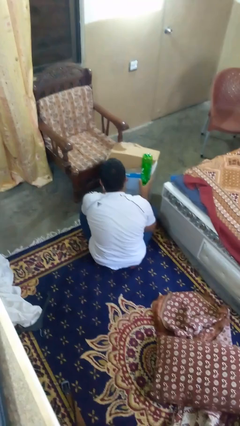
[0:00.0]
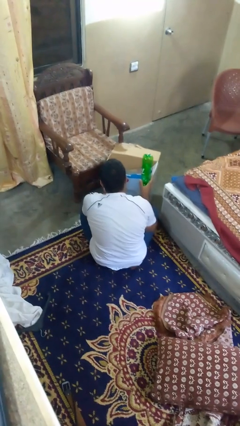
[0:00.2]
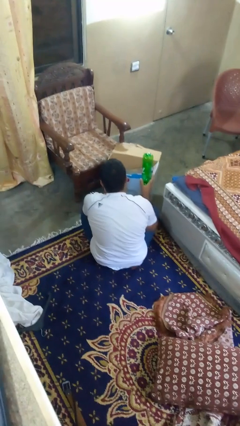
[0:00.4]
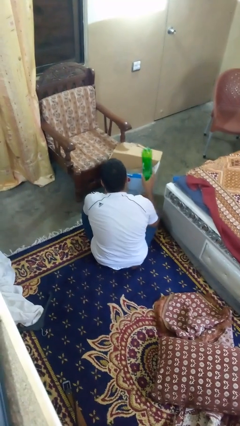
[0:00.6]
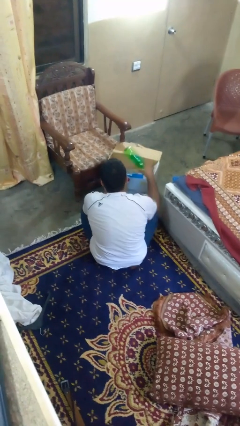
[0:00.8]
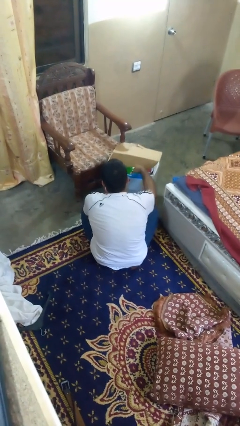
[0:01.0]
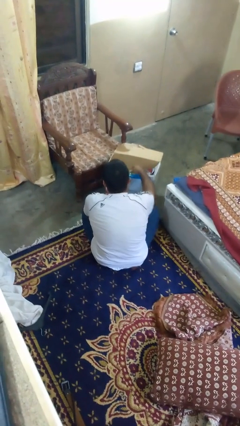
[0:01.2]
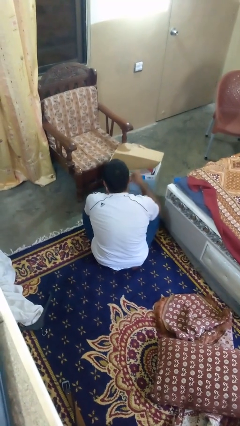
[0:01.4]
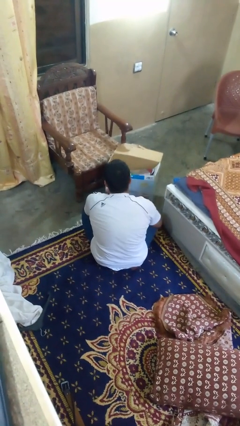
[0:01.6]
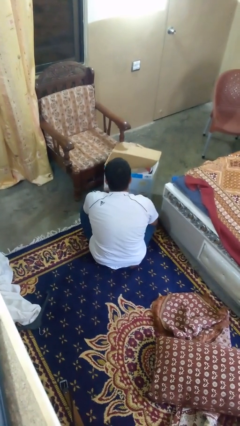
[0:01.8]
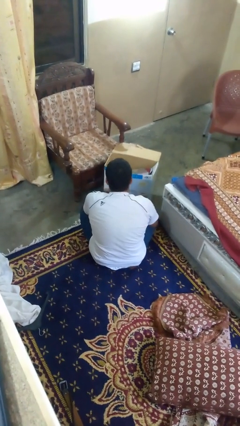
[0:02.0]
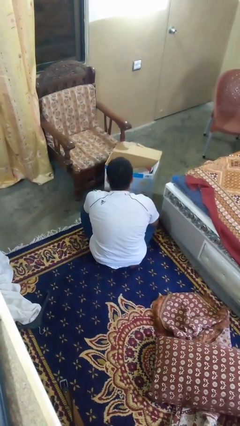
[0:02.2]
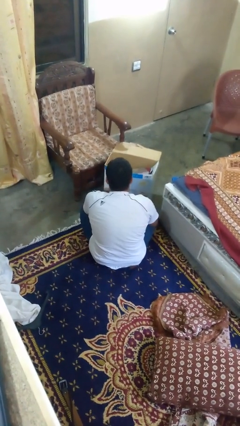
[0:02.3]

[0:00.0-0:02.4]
person puts object into box

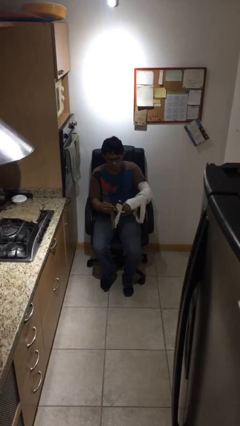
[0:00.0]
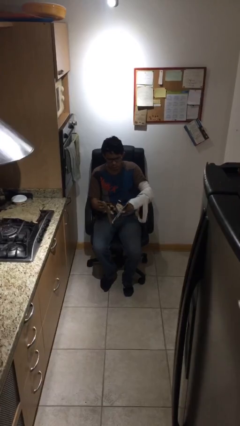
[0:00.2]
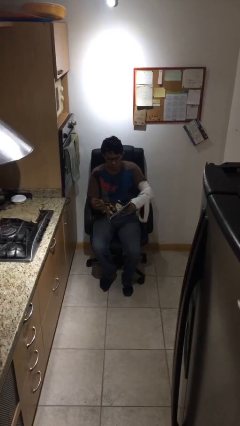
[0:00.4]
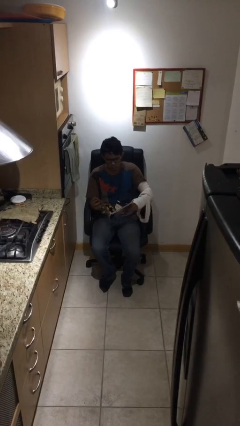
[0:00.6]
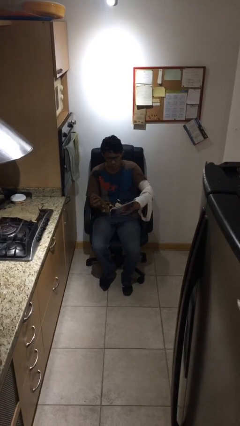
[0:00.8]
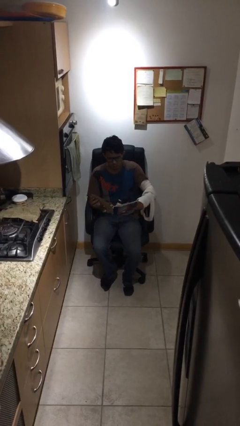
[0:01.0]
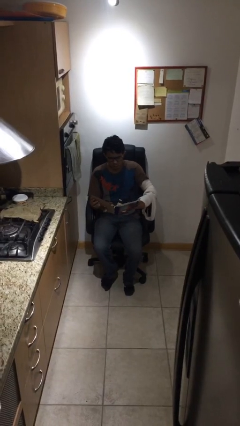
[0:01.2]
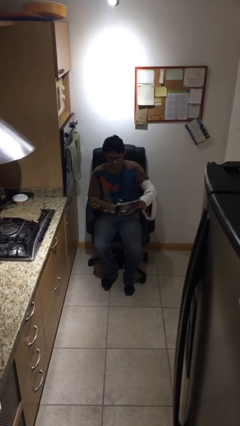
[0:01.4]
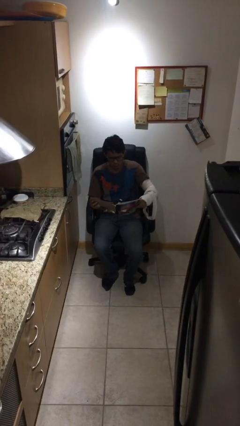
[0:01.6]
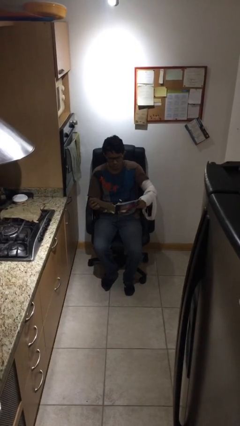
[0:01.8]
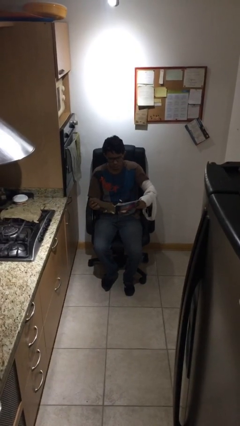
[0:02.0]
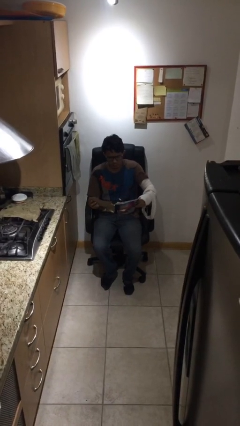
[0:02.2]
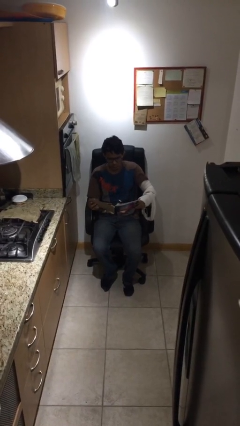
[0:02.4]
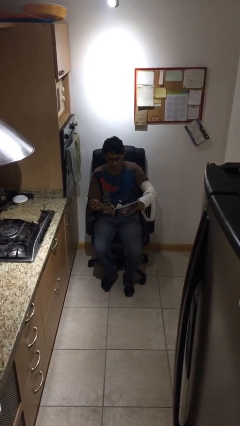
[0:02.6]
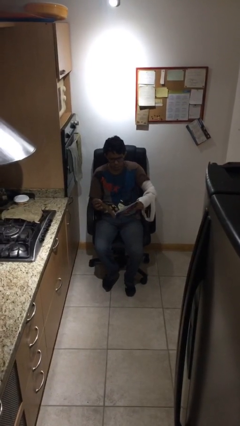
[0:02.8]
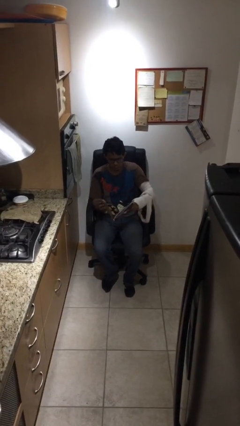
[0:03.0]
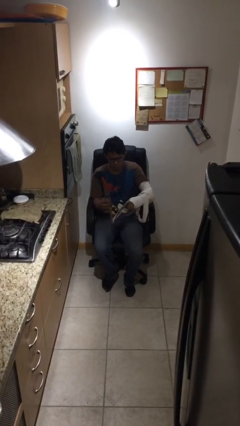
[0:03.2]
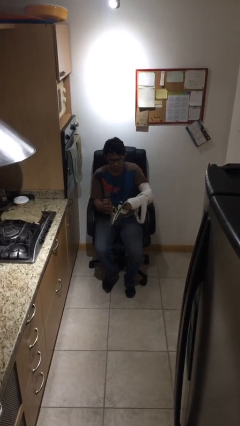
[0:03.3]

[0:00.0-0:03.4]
person reads document

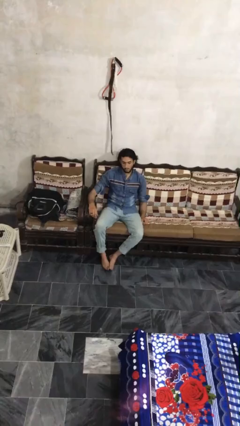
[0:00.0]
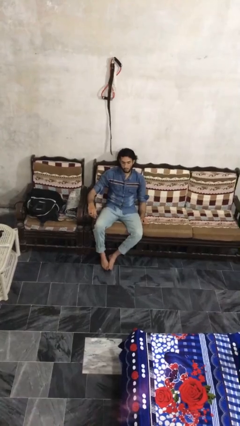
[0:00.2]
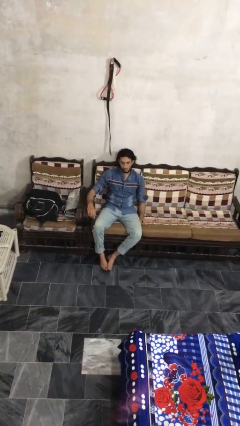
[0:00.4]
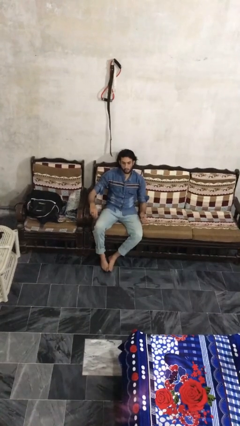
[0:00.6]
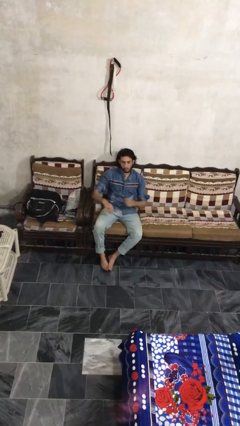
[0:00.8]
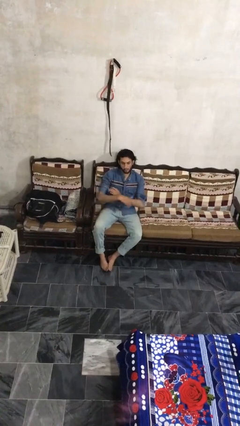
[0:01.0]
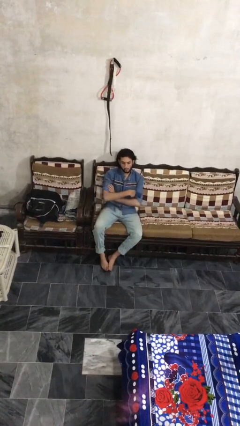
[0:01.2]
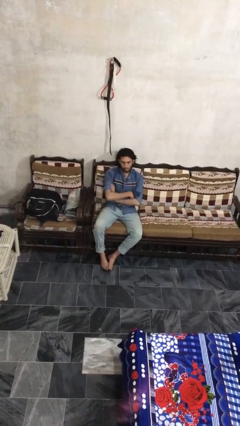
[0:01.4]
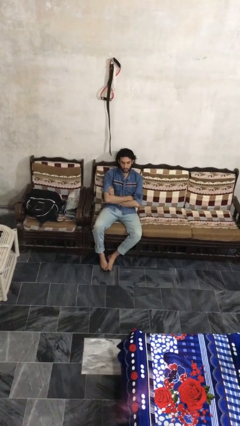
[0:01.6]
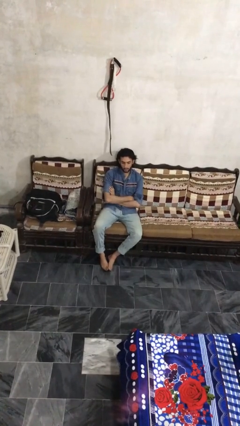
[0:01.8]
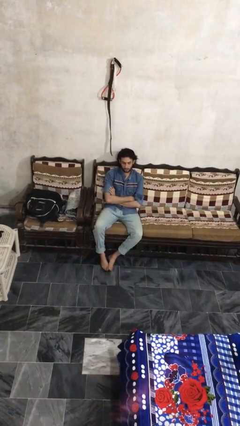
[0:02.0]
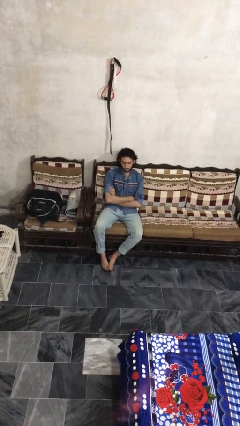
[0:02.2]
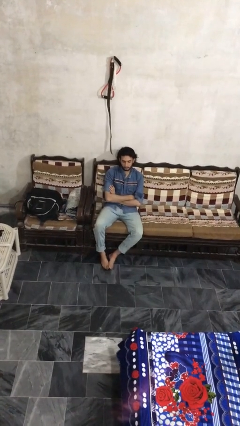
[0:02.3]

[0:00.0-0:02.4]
person crosses arms

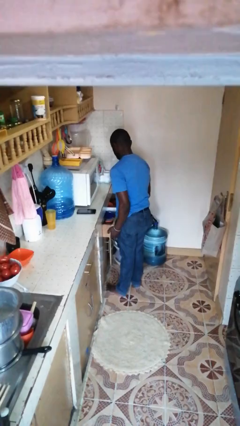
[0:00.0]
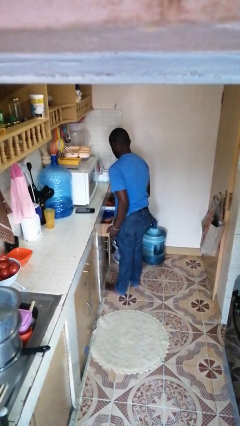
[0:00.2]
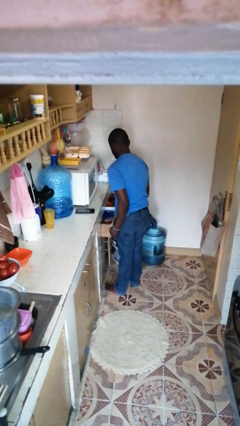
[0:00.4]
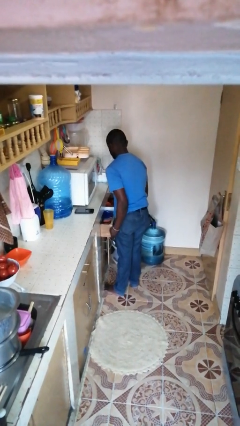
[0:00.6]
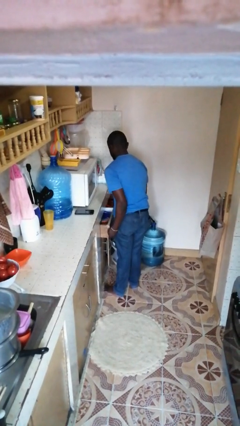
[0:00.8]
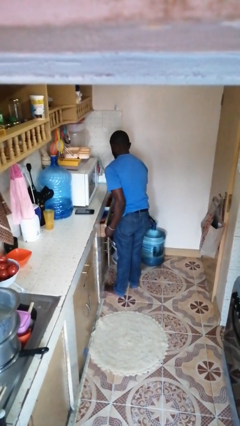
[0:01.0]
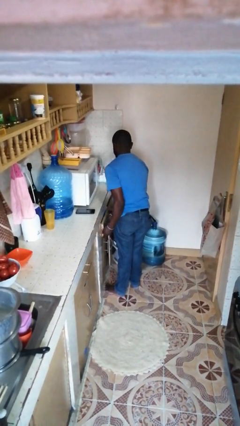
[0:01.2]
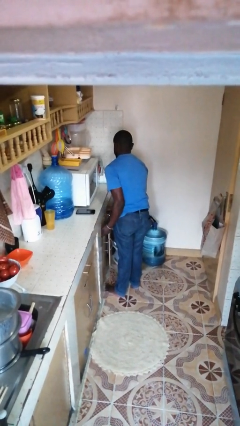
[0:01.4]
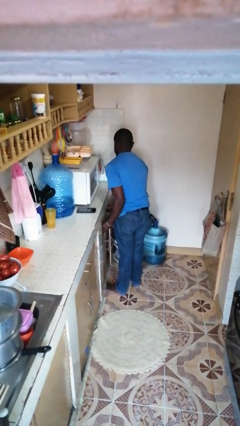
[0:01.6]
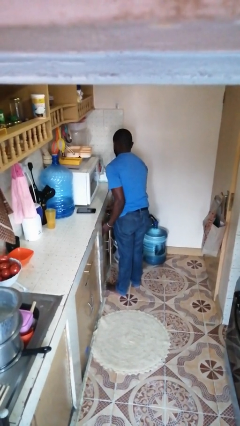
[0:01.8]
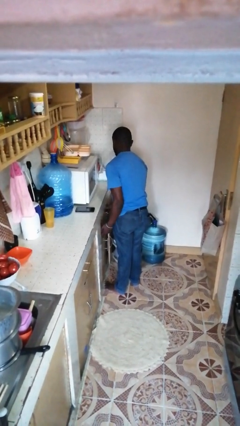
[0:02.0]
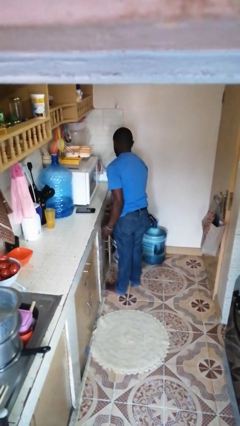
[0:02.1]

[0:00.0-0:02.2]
person closes kitchen drawer

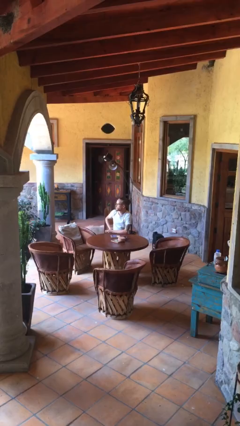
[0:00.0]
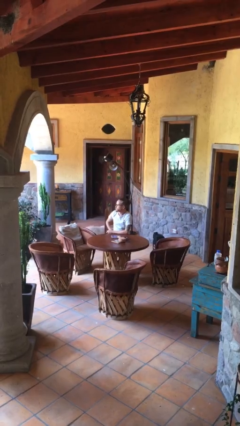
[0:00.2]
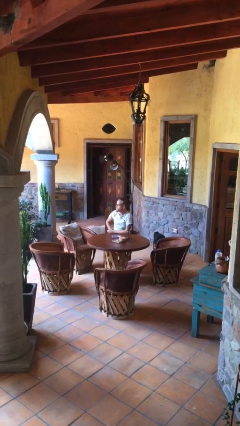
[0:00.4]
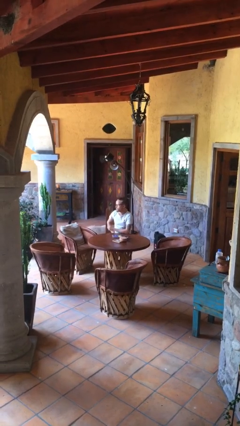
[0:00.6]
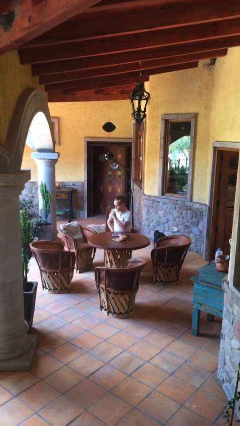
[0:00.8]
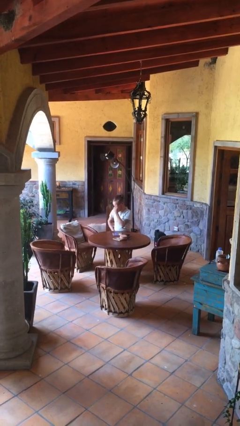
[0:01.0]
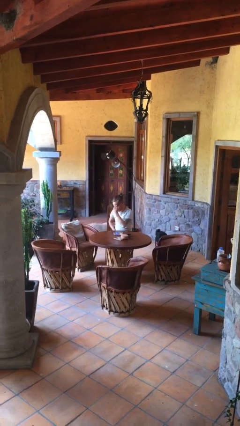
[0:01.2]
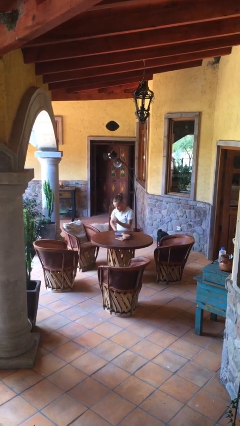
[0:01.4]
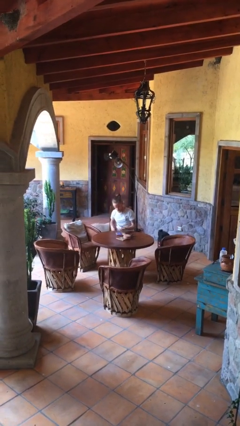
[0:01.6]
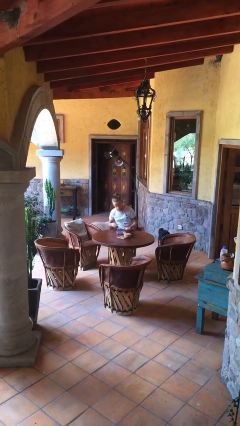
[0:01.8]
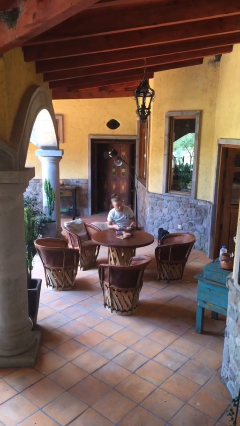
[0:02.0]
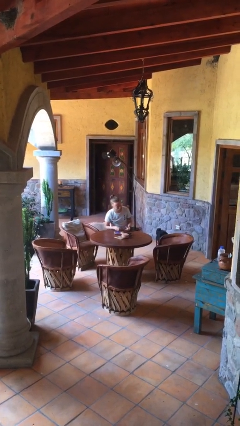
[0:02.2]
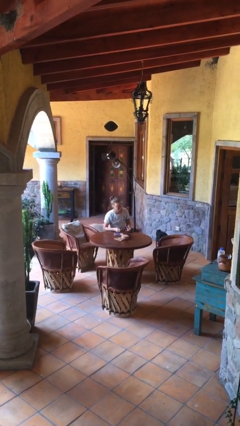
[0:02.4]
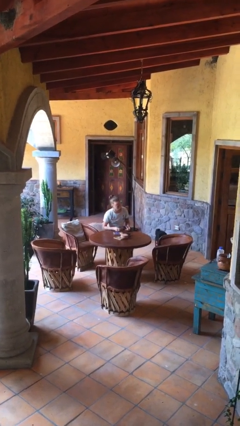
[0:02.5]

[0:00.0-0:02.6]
person takes off glasses

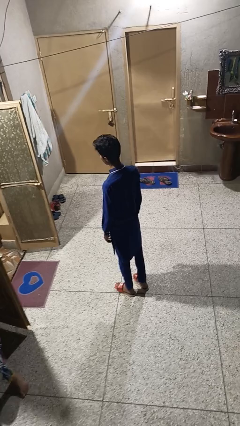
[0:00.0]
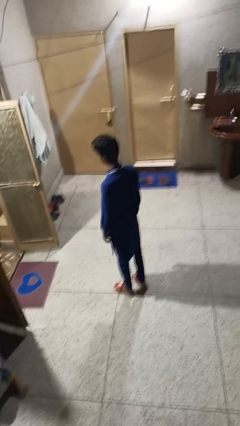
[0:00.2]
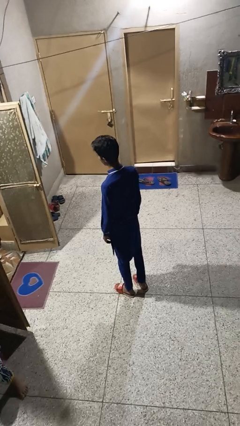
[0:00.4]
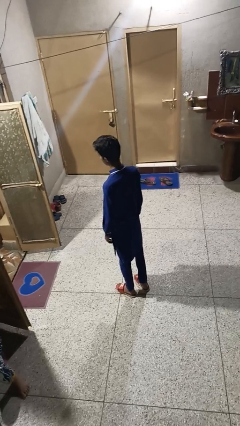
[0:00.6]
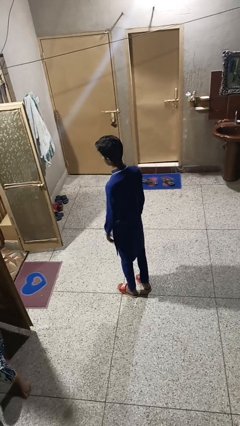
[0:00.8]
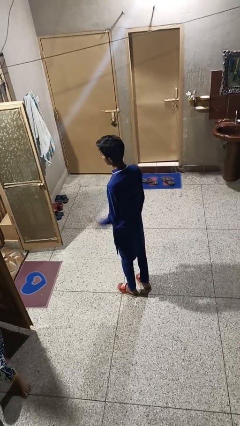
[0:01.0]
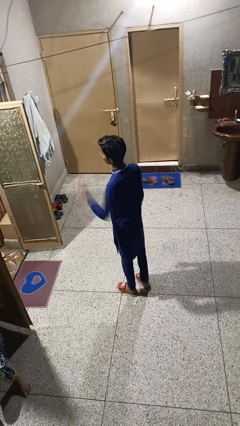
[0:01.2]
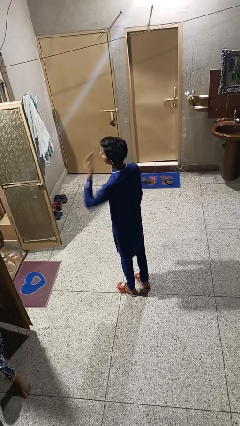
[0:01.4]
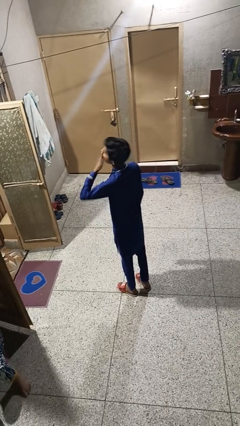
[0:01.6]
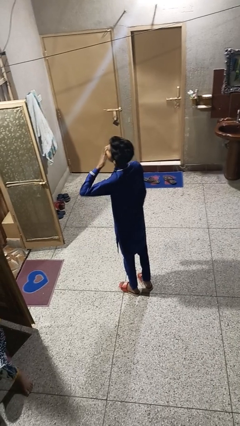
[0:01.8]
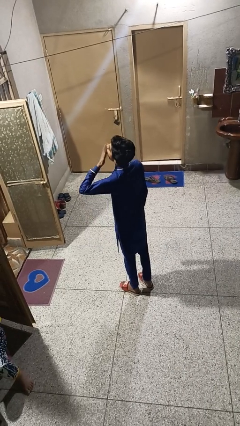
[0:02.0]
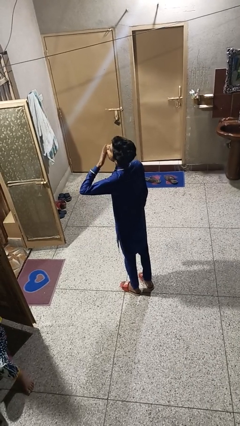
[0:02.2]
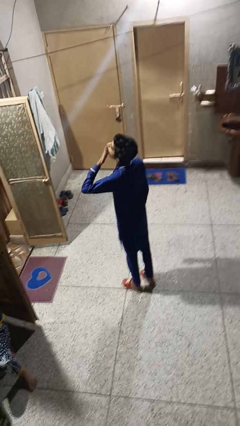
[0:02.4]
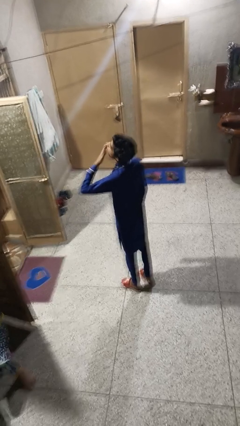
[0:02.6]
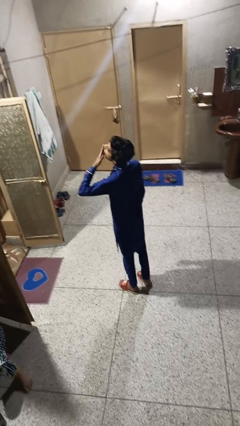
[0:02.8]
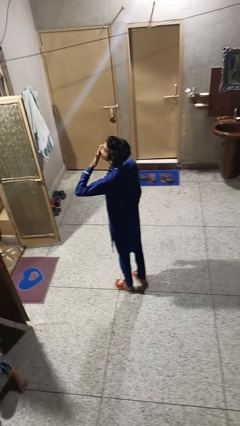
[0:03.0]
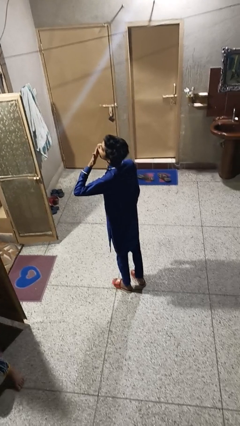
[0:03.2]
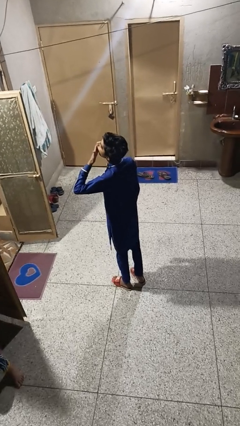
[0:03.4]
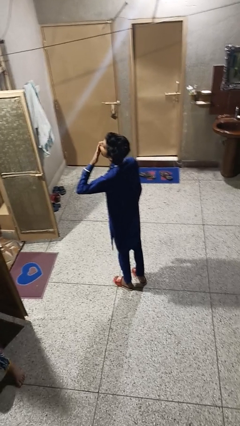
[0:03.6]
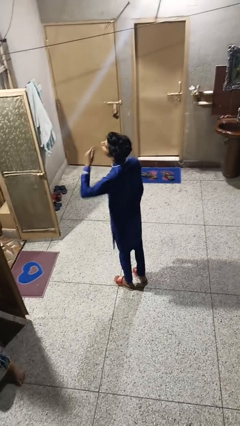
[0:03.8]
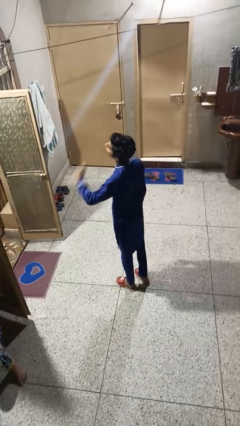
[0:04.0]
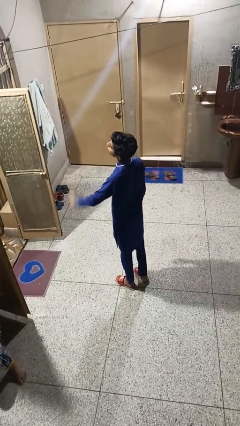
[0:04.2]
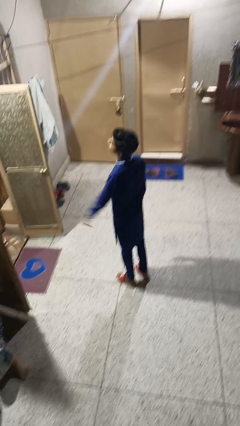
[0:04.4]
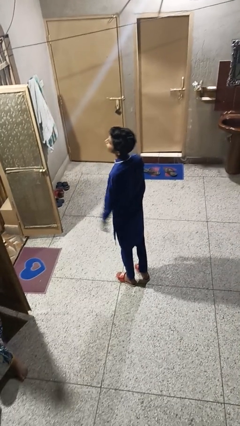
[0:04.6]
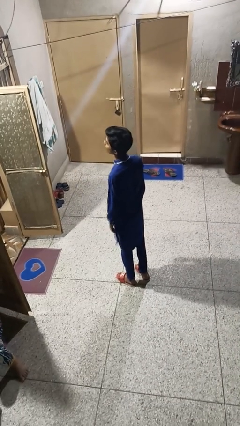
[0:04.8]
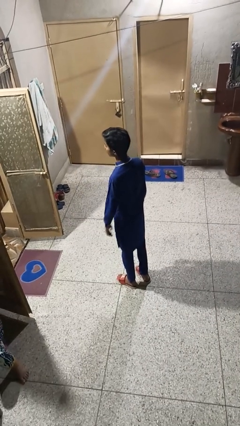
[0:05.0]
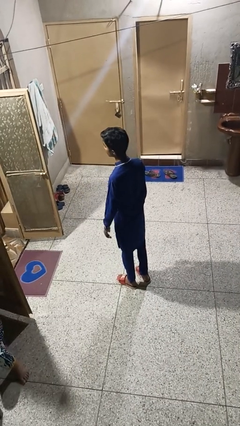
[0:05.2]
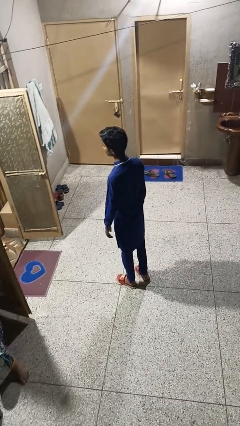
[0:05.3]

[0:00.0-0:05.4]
person yawns
